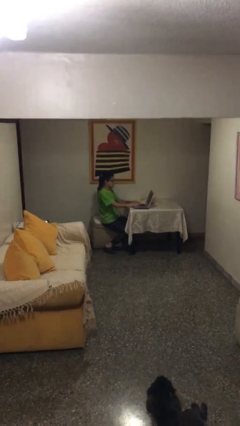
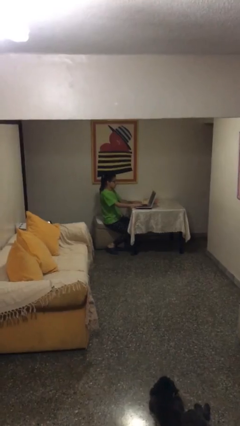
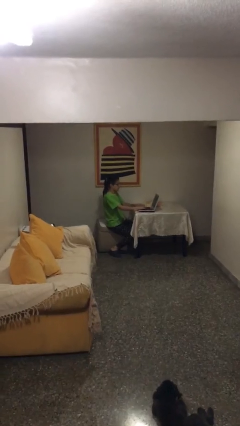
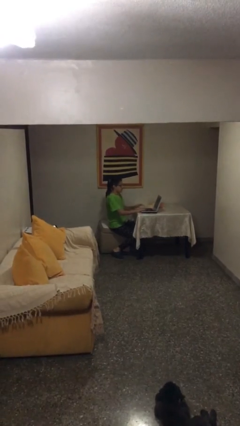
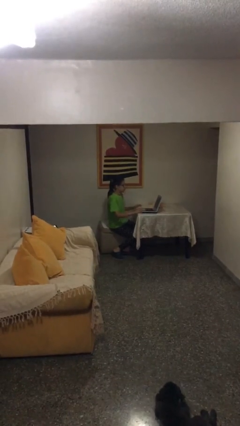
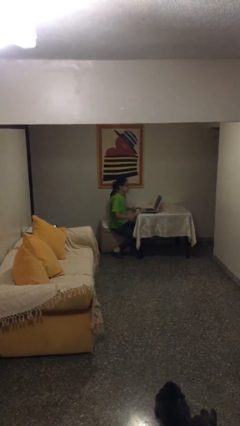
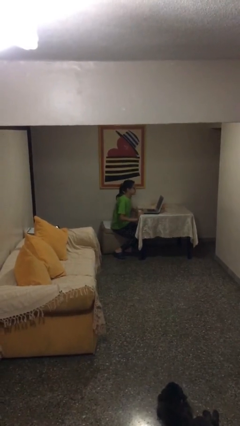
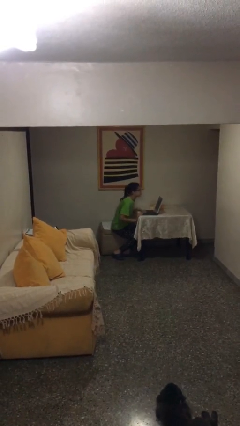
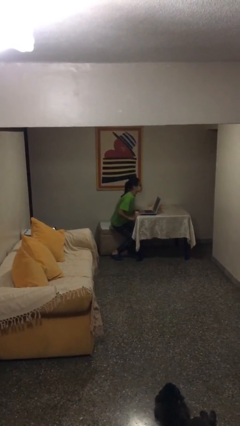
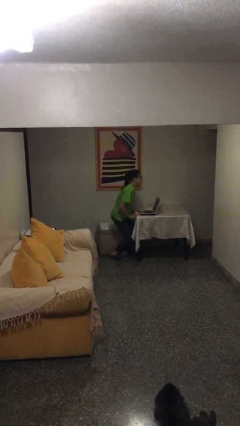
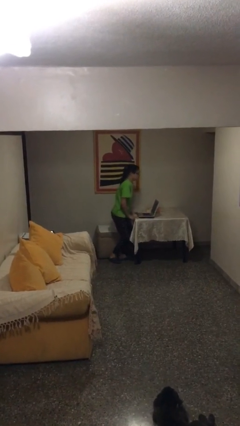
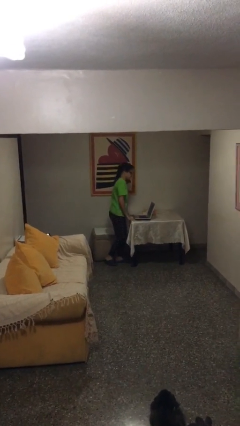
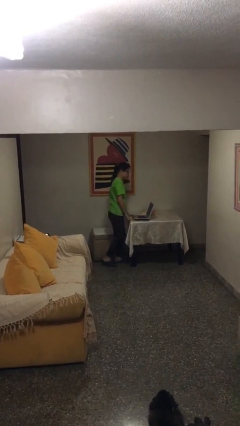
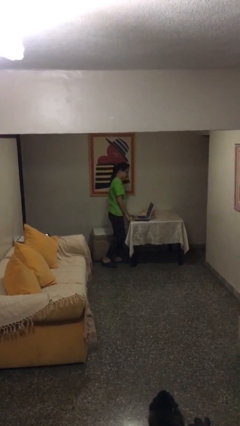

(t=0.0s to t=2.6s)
person stands up

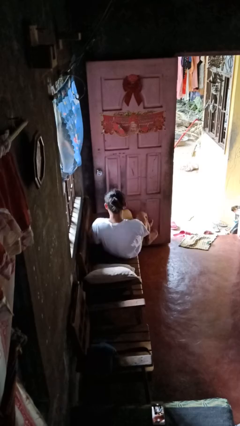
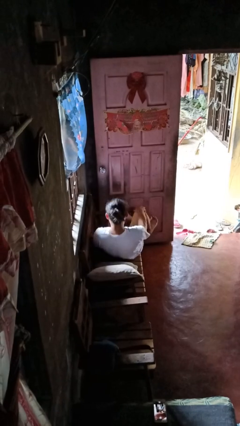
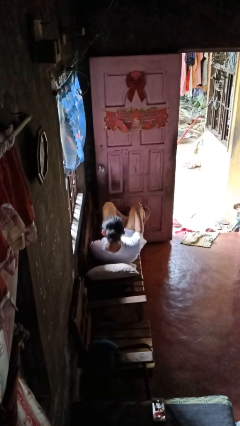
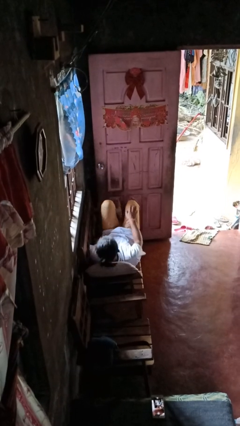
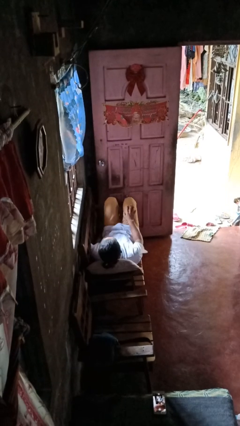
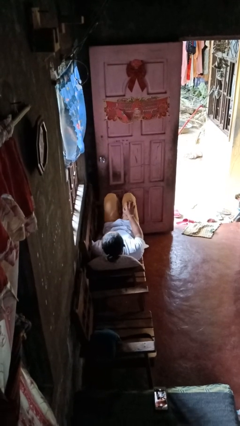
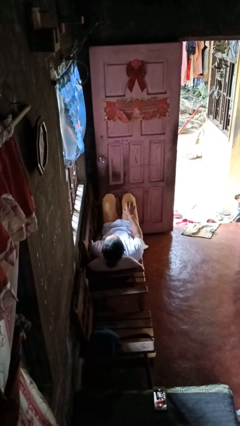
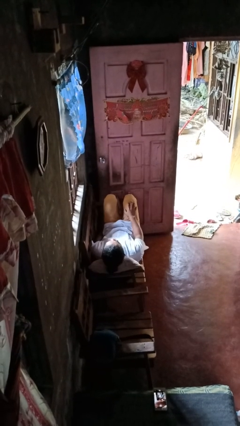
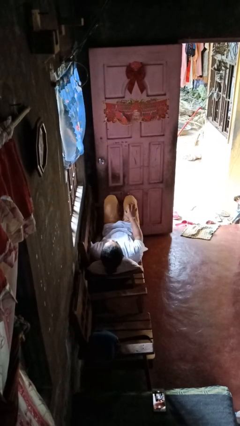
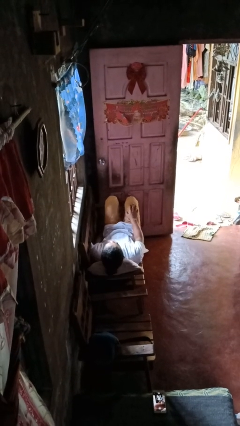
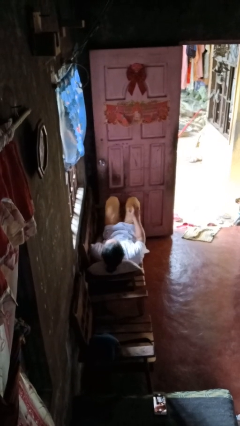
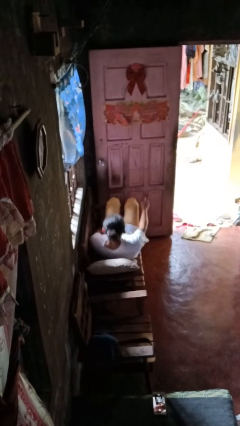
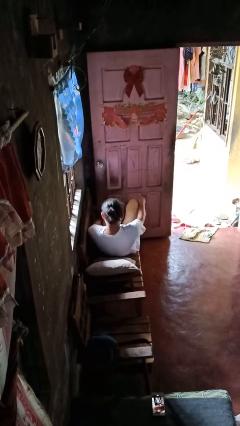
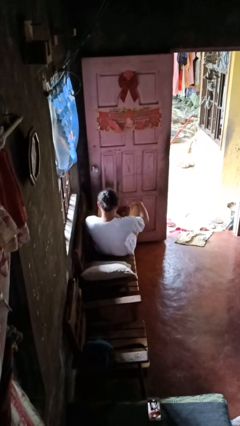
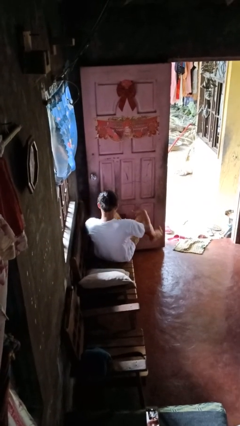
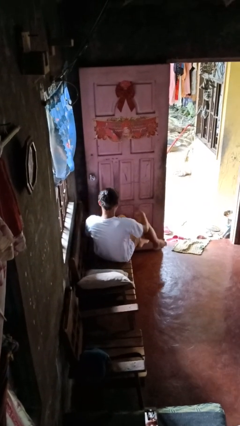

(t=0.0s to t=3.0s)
person lies down on couch

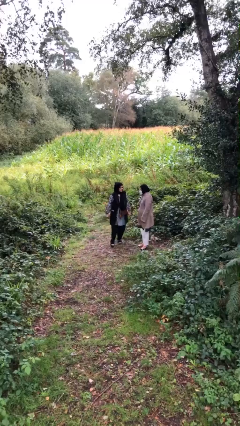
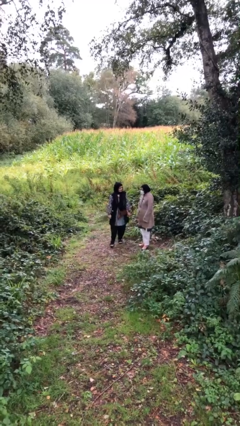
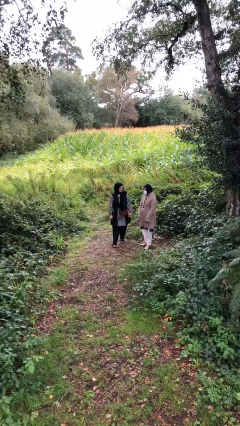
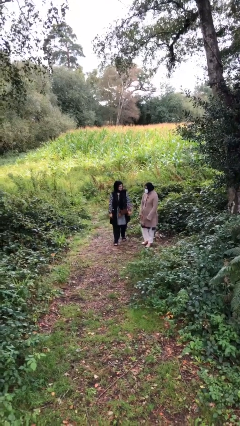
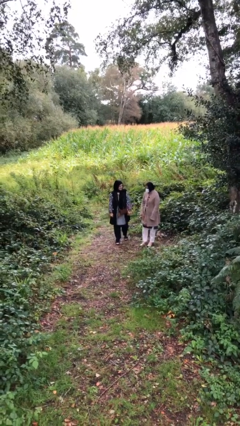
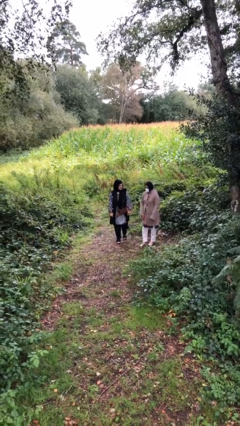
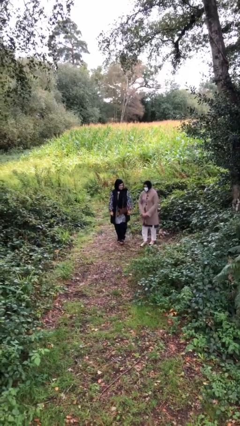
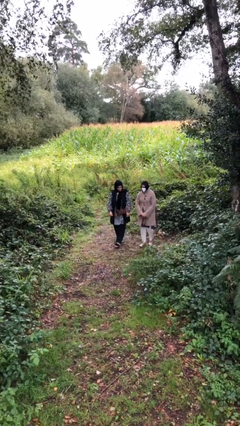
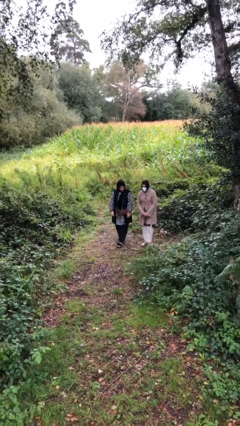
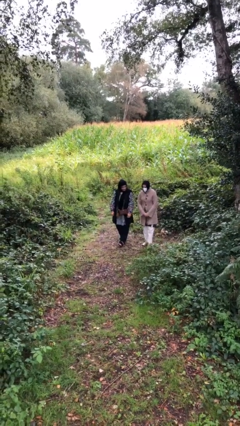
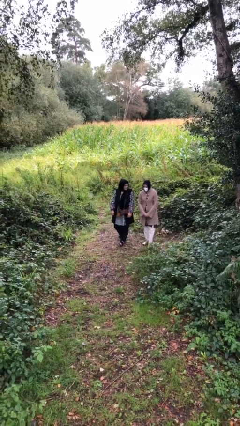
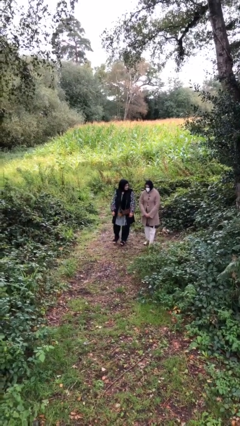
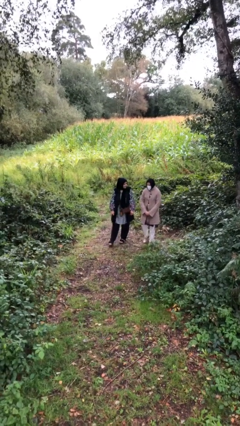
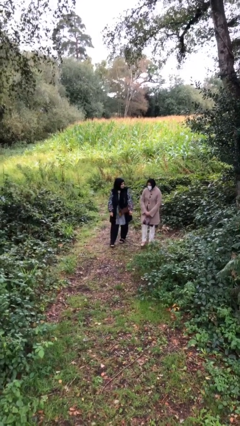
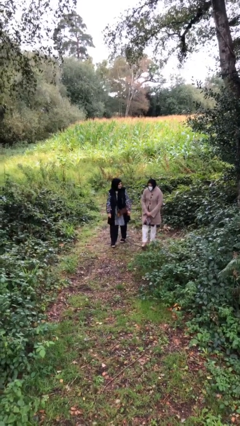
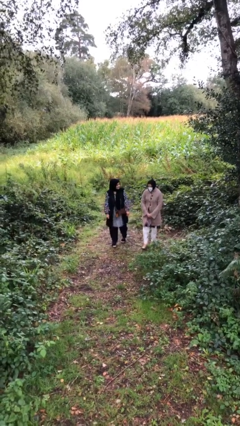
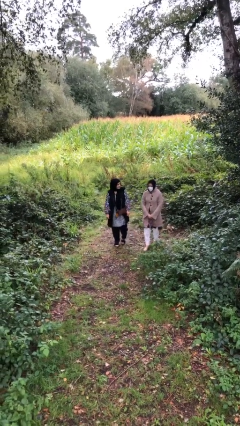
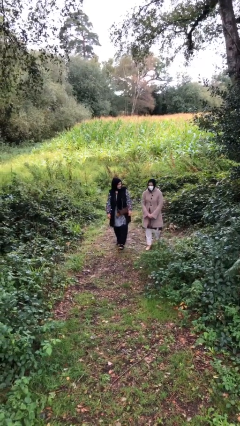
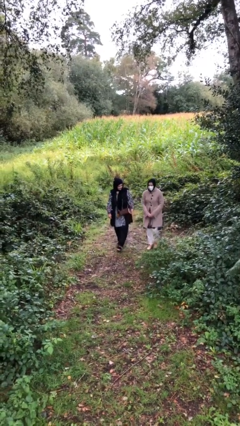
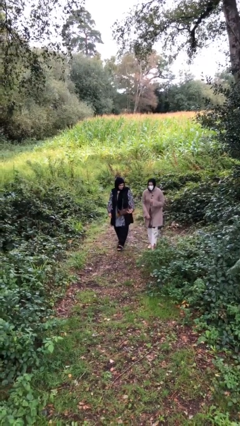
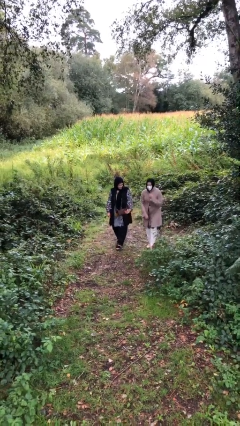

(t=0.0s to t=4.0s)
person talks to person

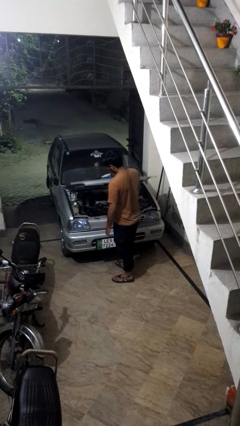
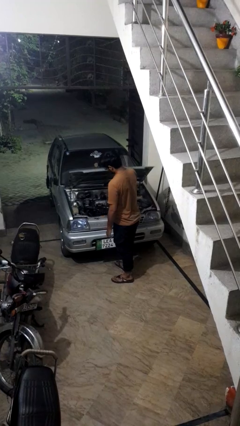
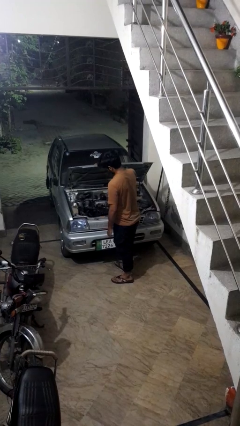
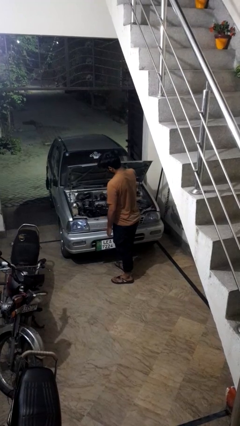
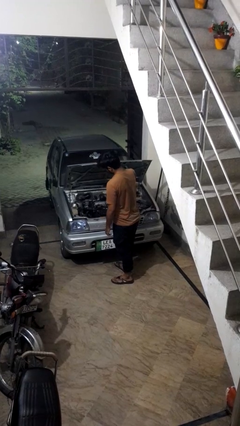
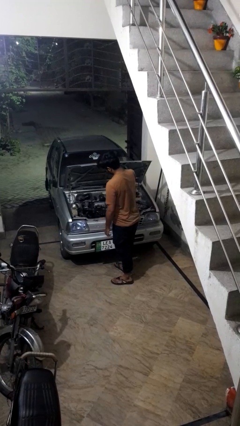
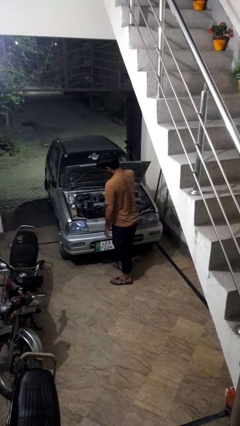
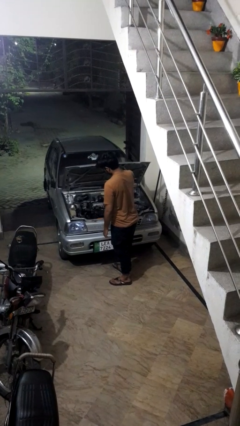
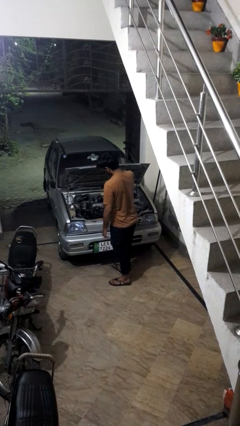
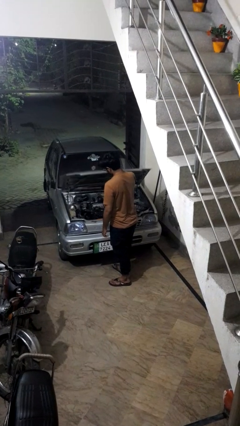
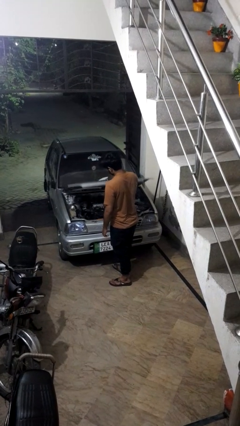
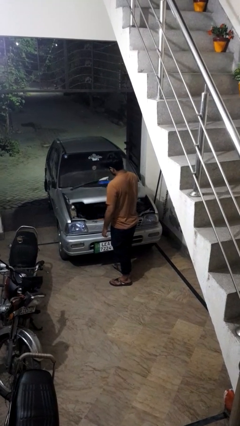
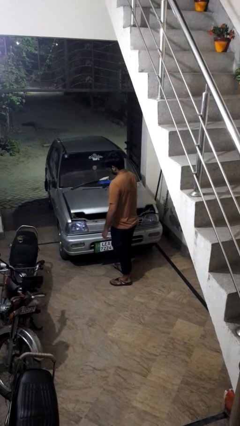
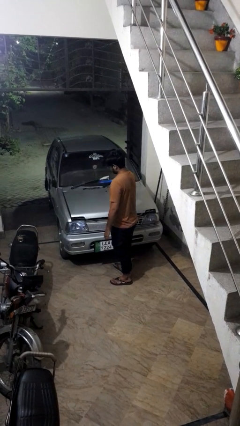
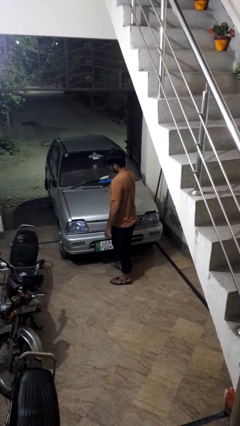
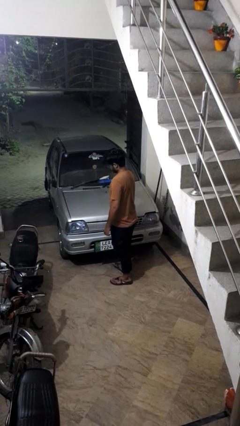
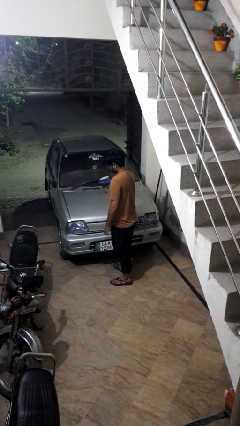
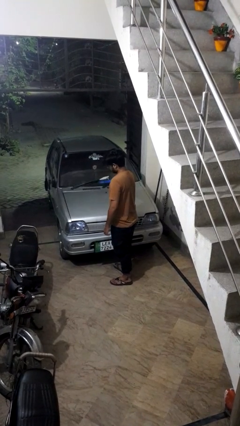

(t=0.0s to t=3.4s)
person closes car hood

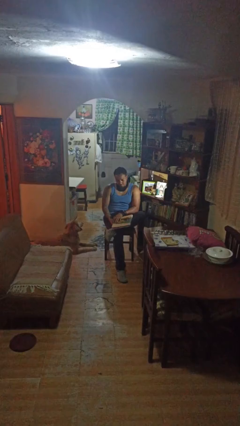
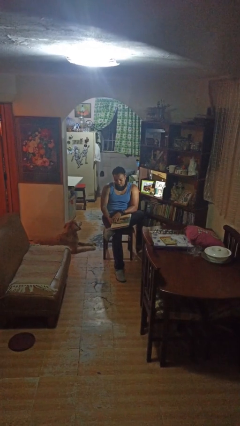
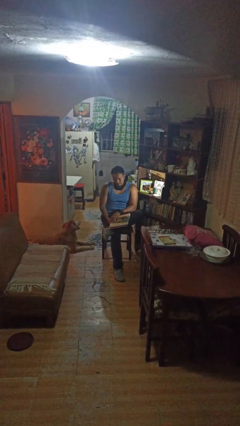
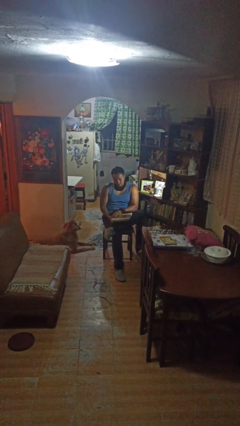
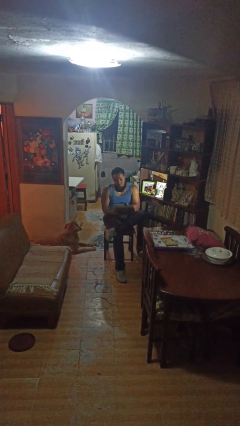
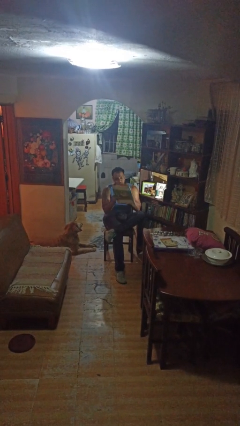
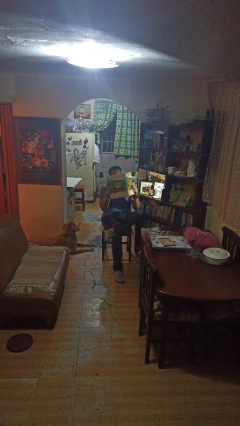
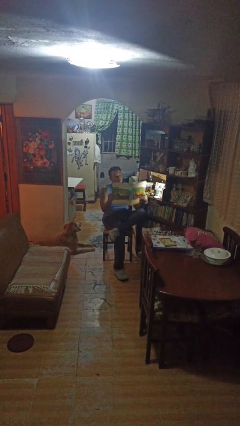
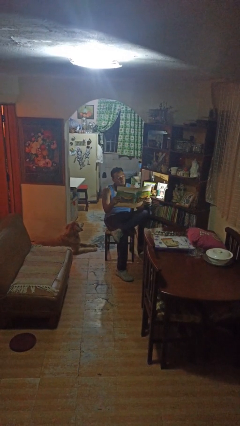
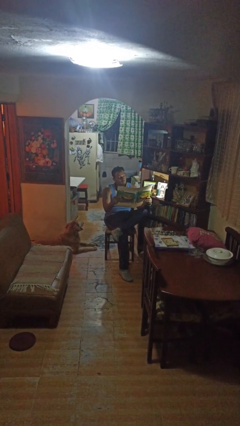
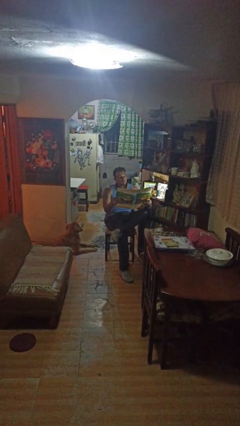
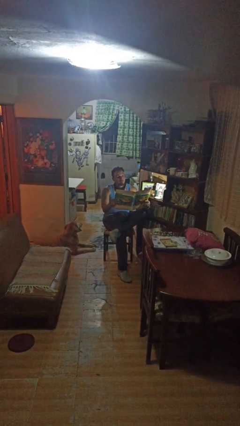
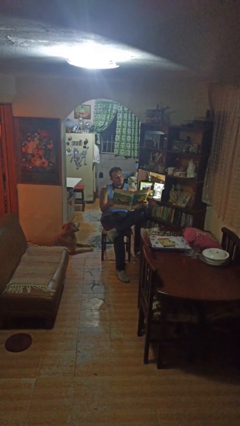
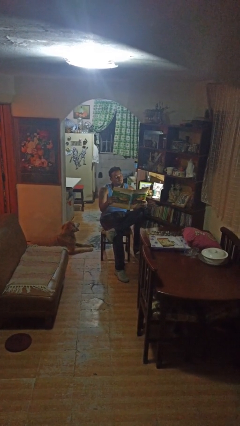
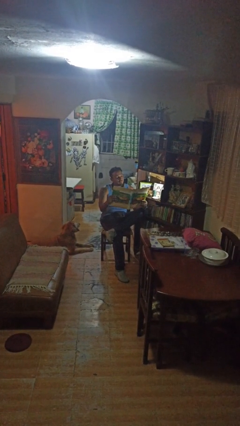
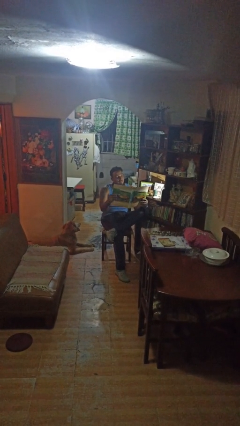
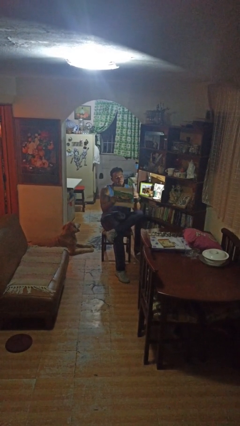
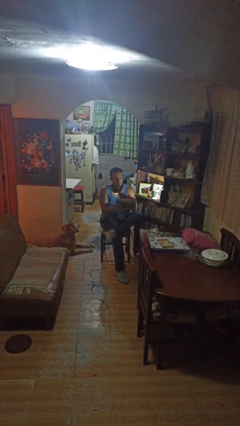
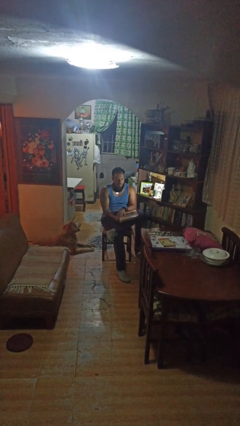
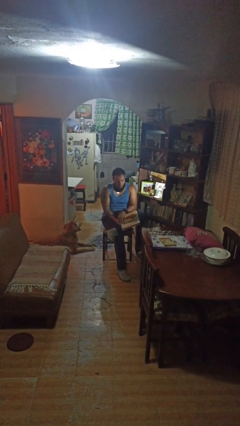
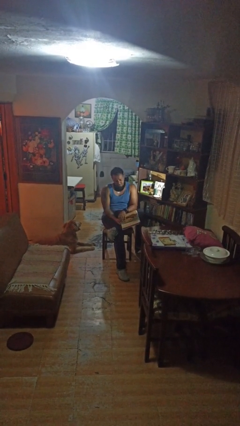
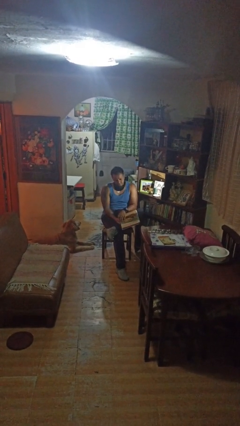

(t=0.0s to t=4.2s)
person reads document

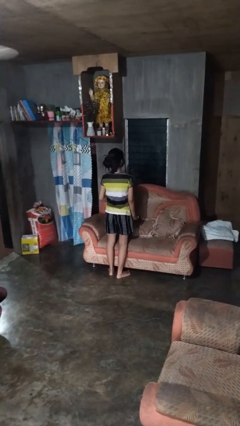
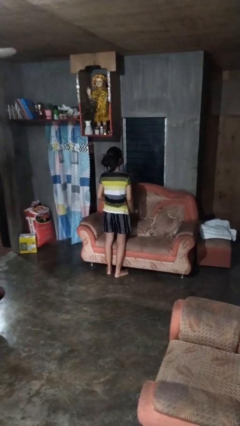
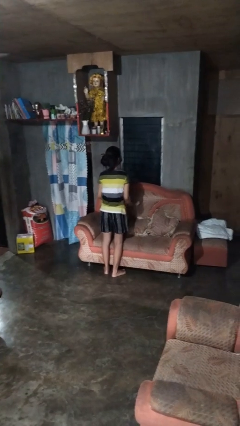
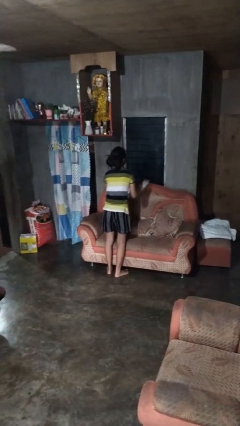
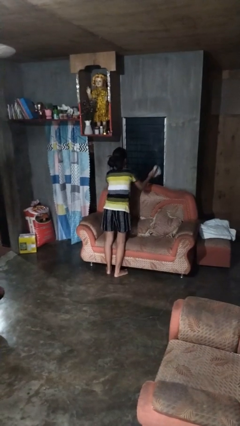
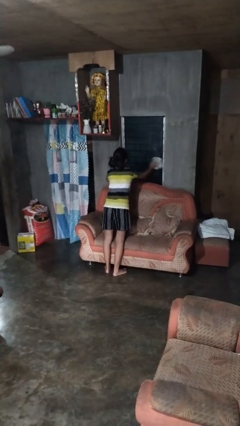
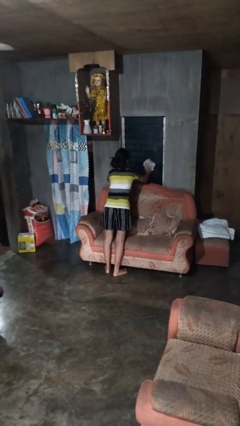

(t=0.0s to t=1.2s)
person washes window
